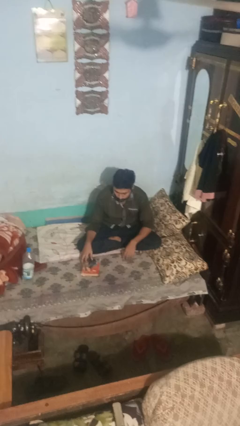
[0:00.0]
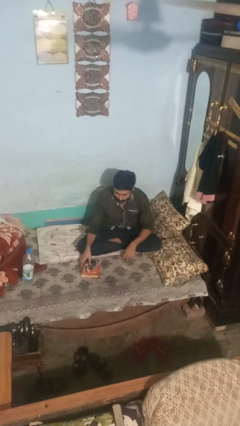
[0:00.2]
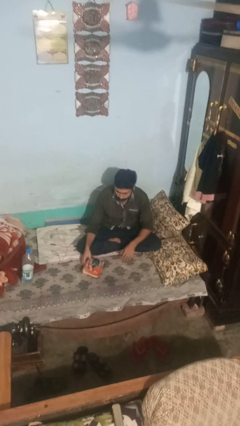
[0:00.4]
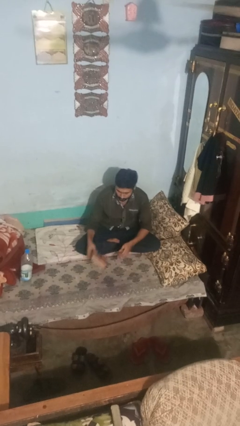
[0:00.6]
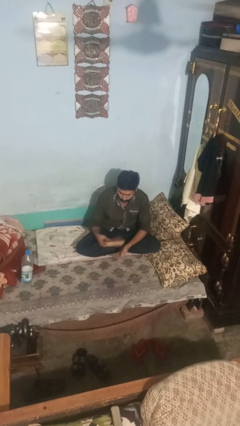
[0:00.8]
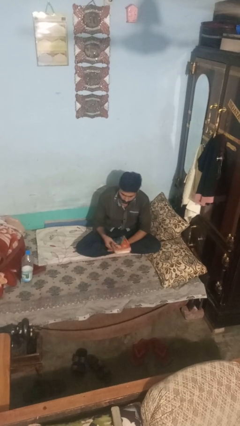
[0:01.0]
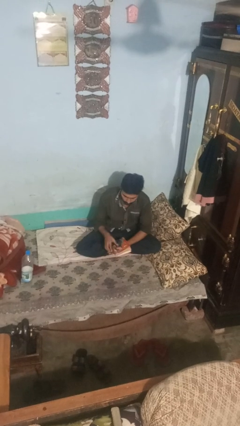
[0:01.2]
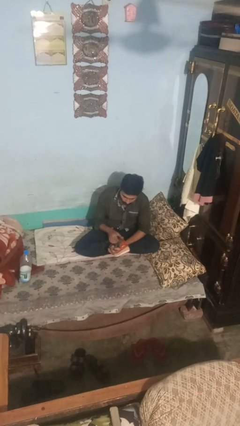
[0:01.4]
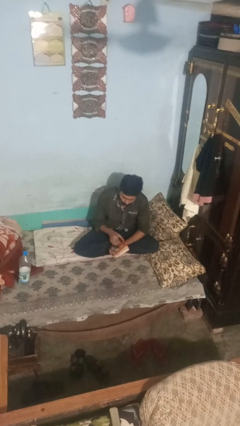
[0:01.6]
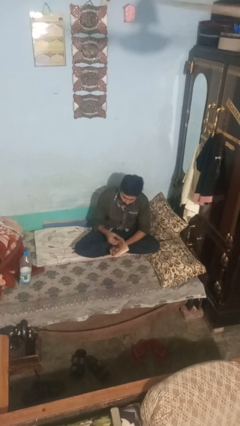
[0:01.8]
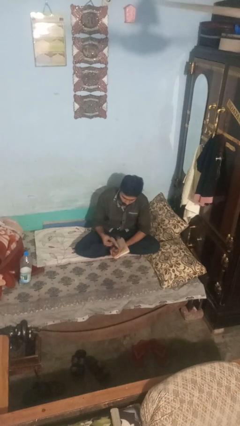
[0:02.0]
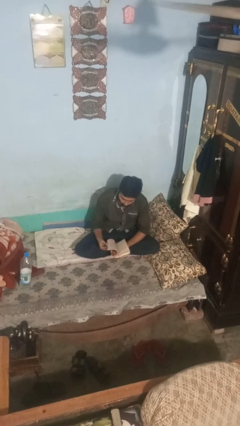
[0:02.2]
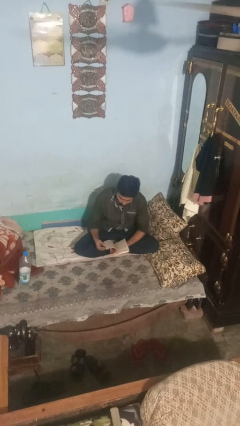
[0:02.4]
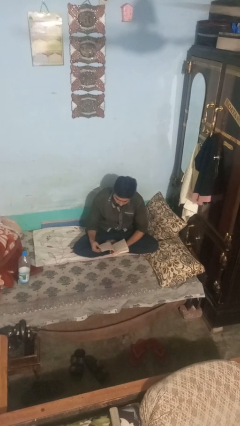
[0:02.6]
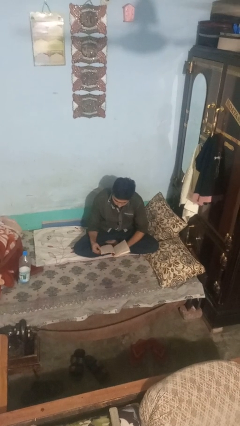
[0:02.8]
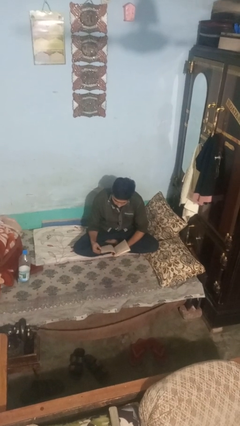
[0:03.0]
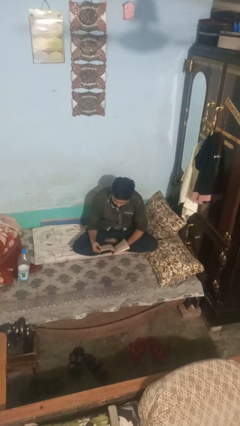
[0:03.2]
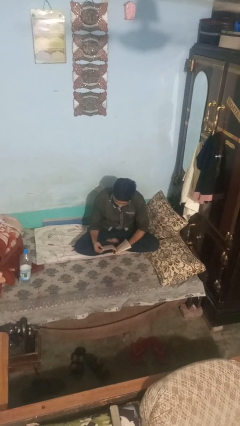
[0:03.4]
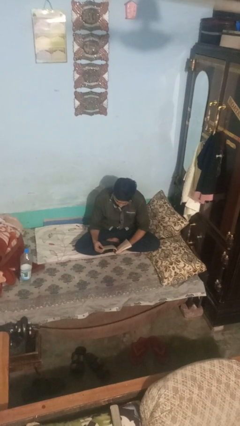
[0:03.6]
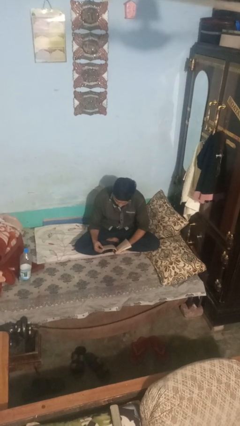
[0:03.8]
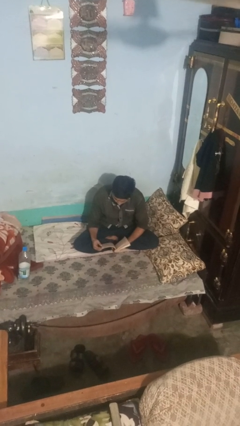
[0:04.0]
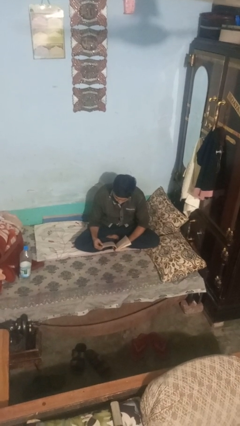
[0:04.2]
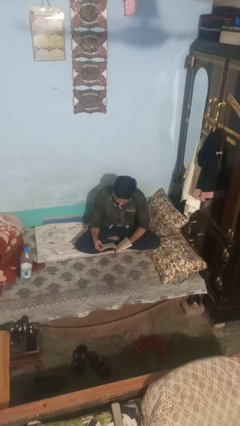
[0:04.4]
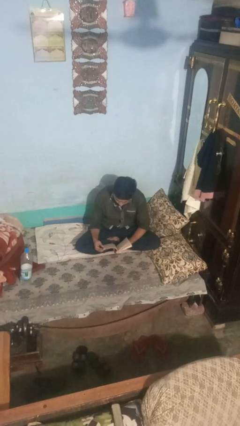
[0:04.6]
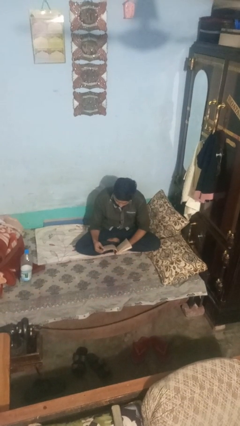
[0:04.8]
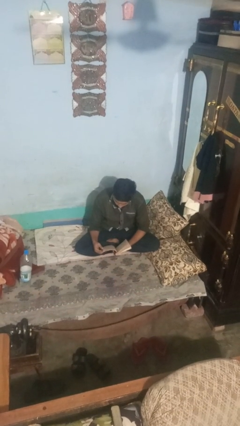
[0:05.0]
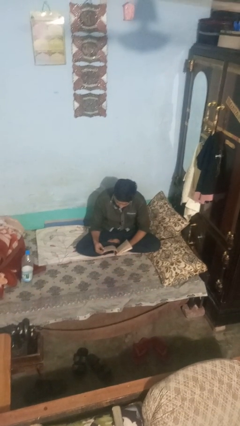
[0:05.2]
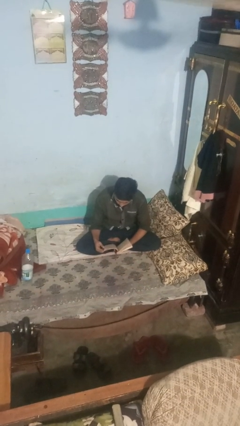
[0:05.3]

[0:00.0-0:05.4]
person reads magazine

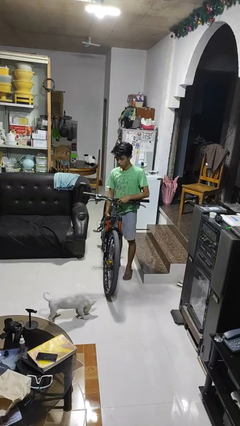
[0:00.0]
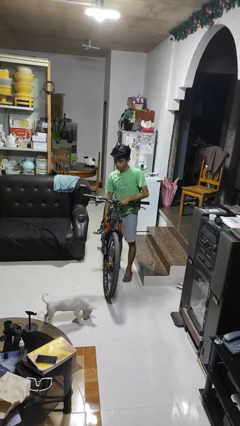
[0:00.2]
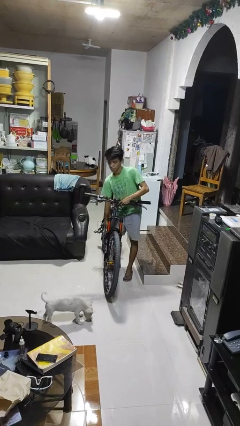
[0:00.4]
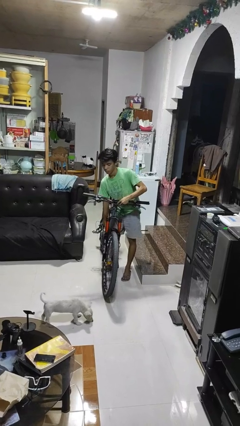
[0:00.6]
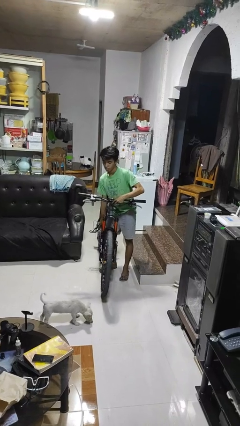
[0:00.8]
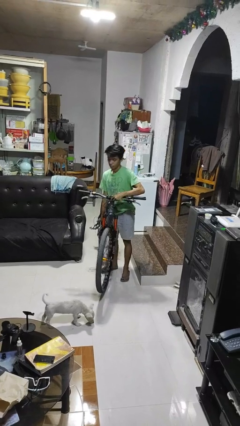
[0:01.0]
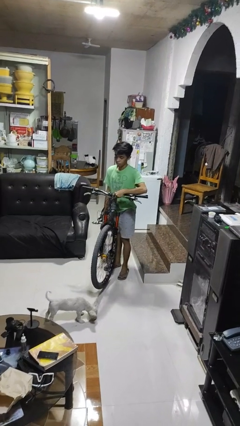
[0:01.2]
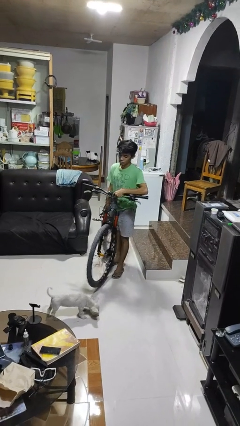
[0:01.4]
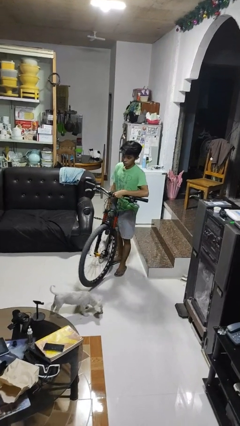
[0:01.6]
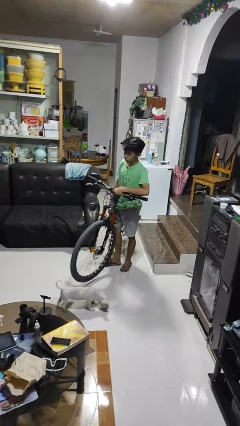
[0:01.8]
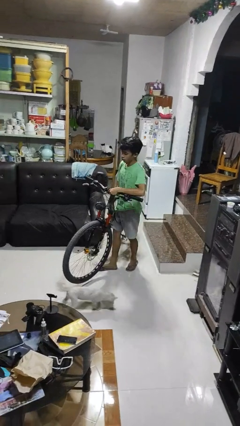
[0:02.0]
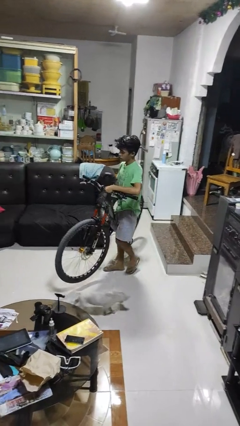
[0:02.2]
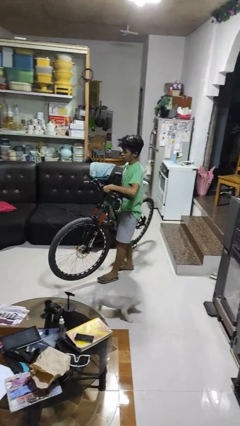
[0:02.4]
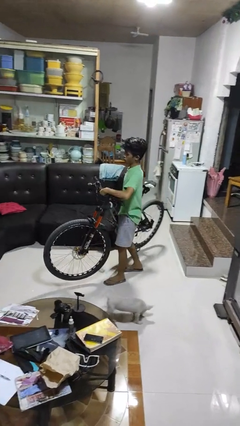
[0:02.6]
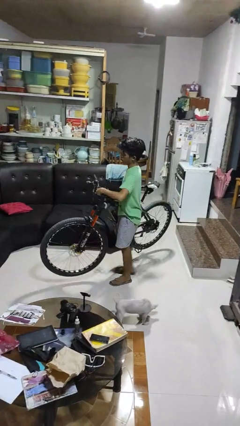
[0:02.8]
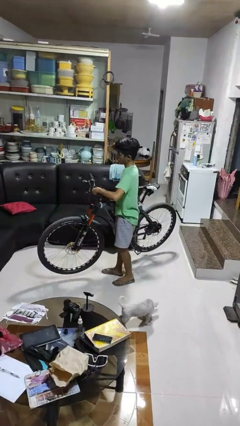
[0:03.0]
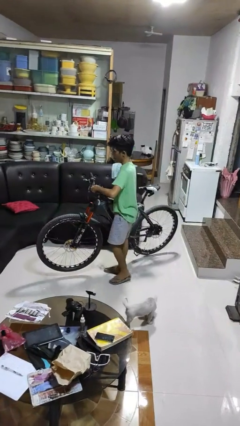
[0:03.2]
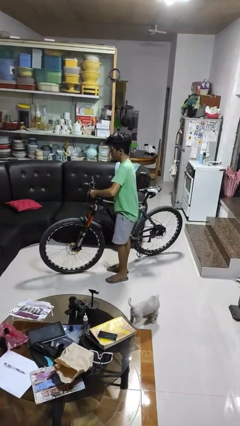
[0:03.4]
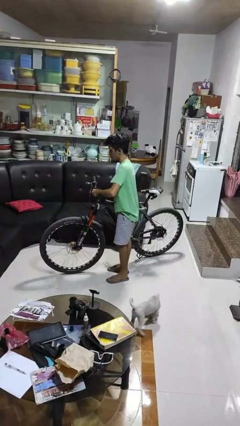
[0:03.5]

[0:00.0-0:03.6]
person carries bicycle

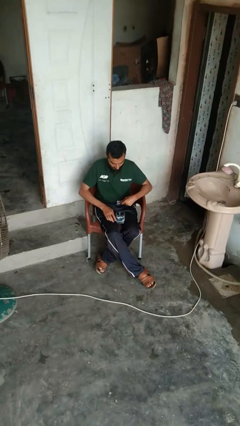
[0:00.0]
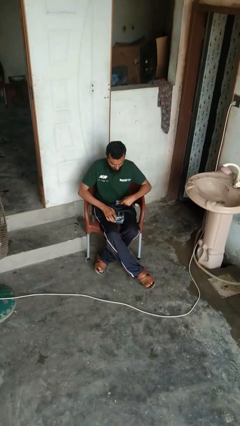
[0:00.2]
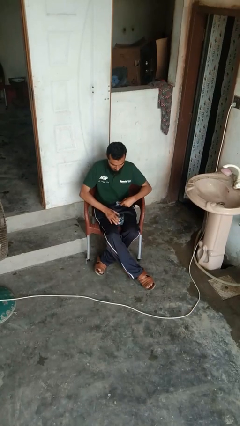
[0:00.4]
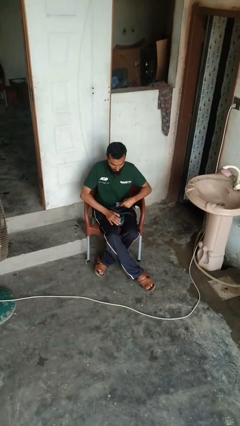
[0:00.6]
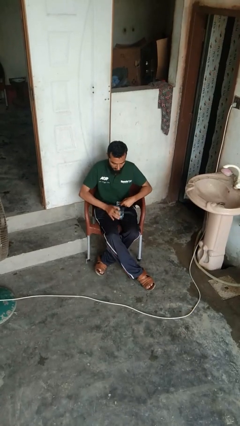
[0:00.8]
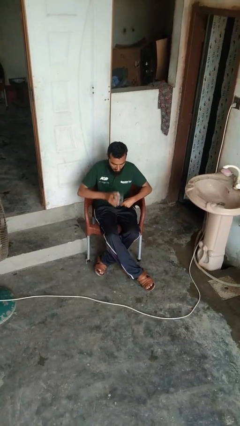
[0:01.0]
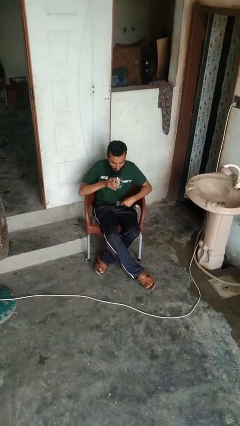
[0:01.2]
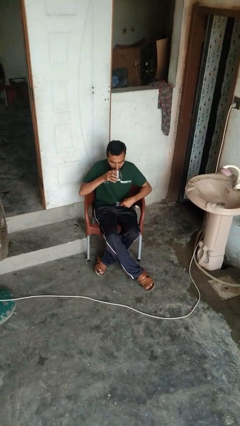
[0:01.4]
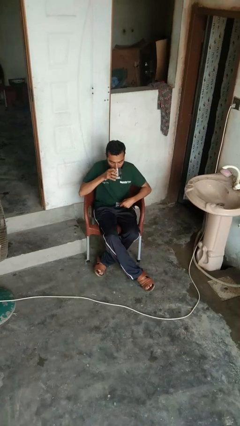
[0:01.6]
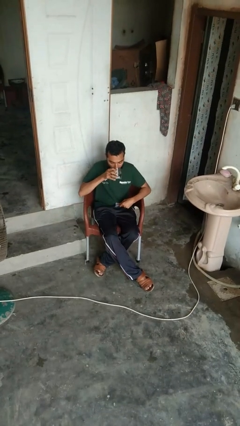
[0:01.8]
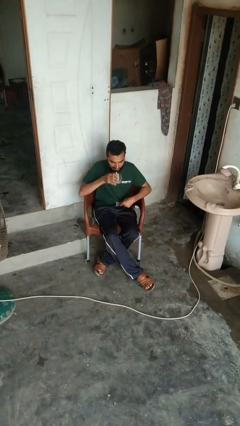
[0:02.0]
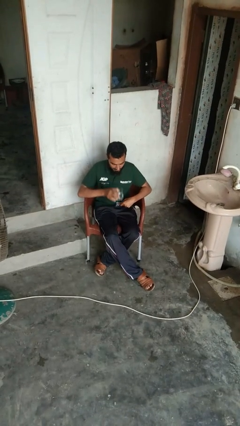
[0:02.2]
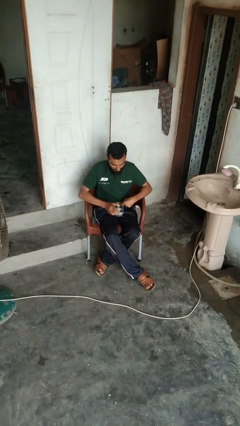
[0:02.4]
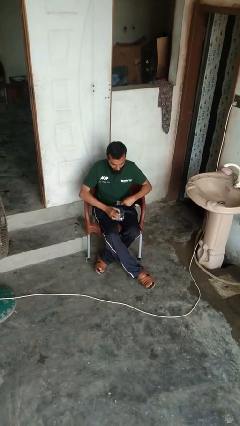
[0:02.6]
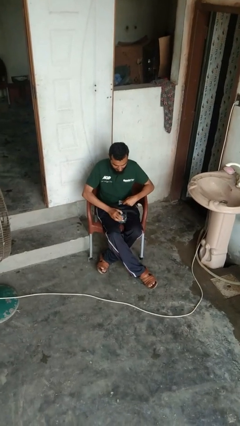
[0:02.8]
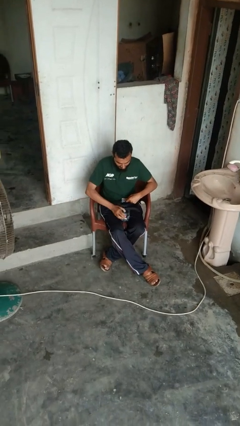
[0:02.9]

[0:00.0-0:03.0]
person drinks from cup

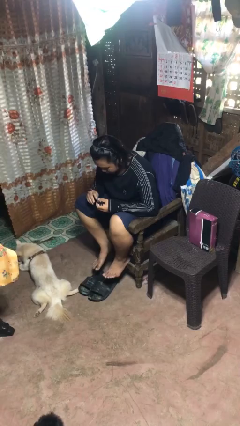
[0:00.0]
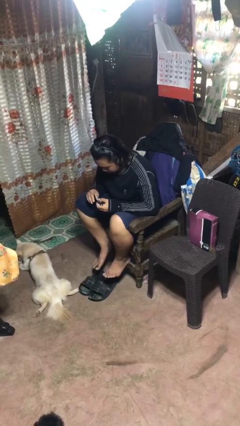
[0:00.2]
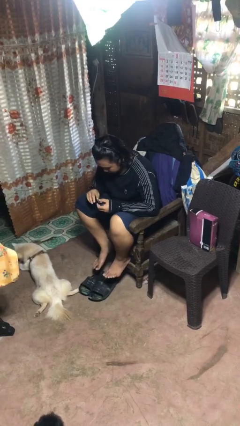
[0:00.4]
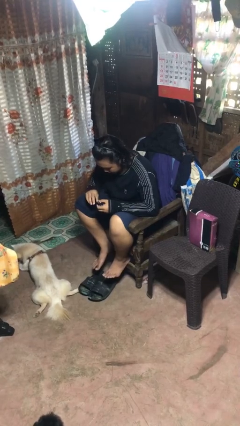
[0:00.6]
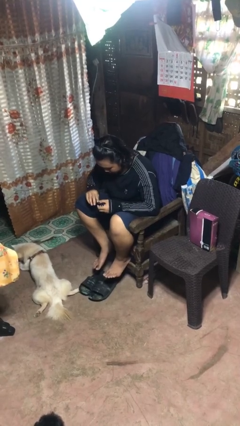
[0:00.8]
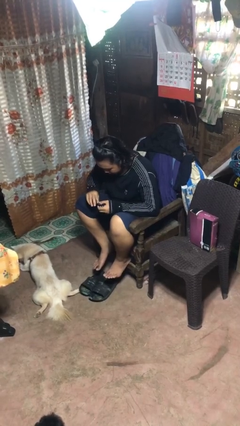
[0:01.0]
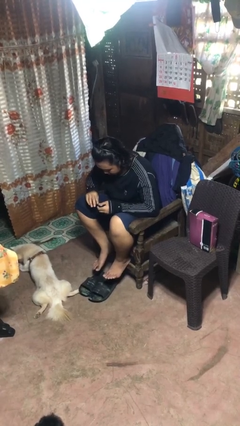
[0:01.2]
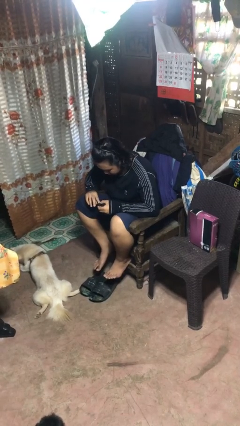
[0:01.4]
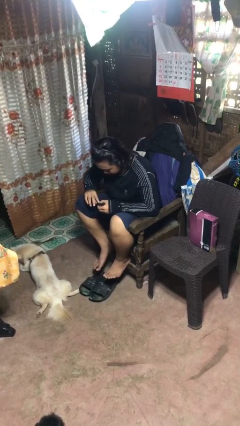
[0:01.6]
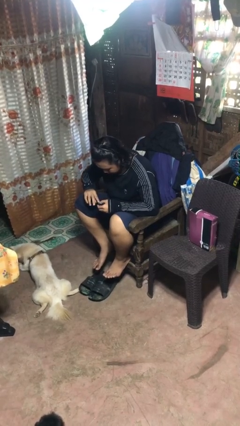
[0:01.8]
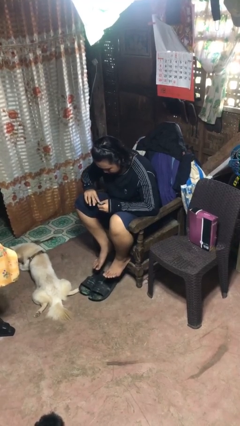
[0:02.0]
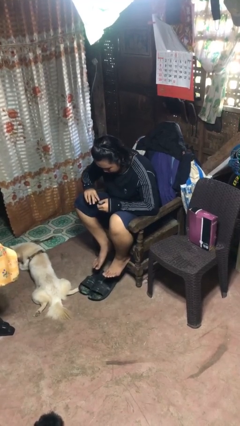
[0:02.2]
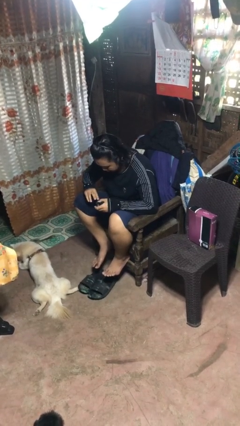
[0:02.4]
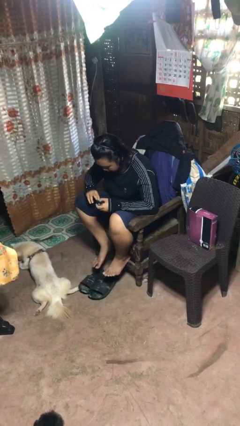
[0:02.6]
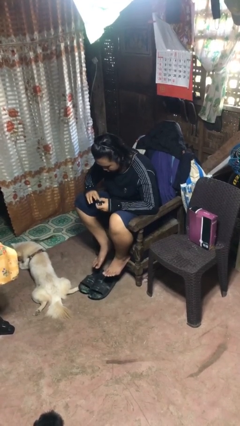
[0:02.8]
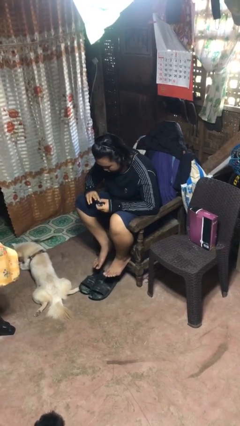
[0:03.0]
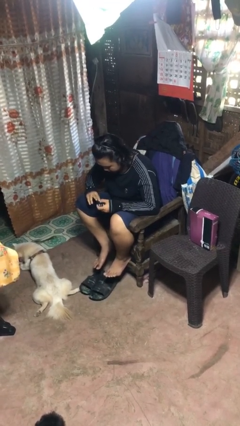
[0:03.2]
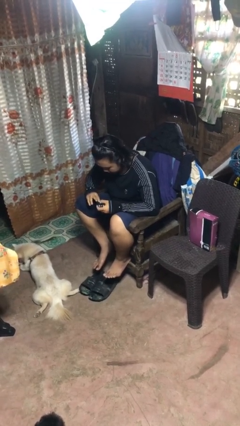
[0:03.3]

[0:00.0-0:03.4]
person clips fingernails

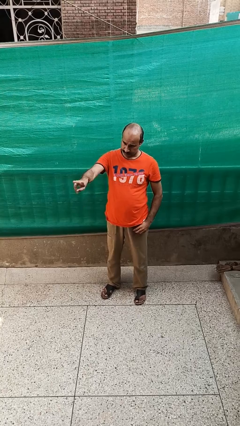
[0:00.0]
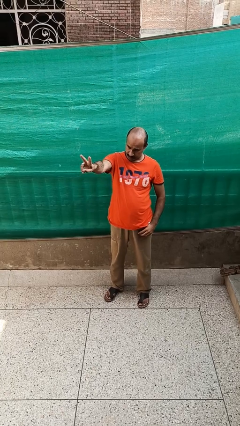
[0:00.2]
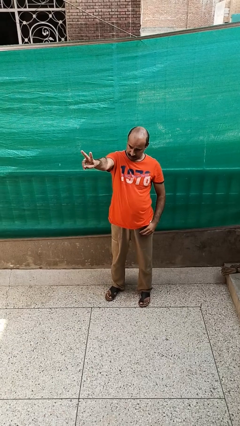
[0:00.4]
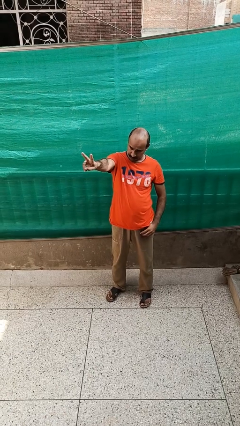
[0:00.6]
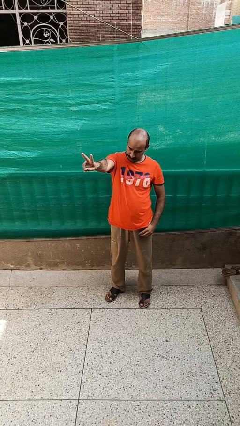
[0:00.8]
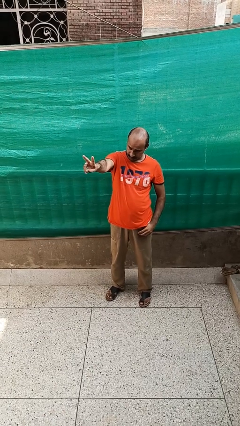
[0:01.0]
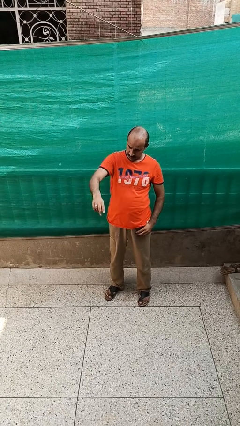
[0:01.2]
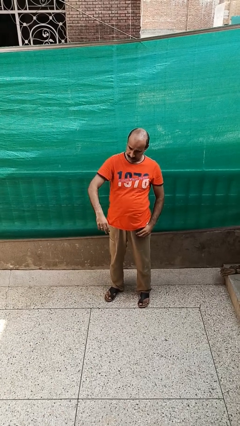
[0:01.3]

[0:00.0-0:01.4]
person gestures peace

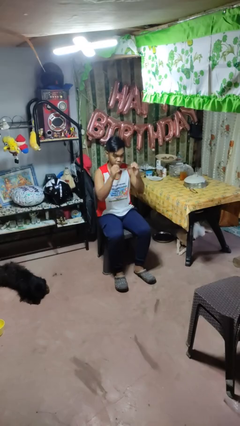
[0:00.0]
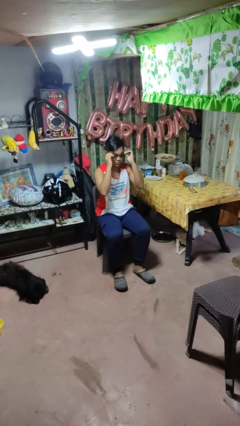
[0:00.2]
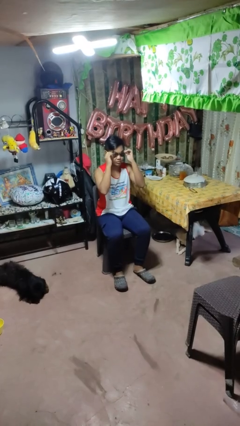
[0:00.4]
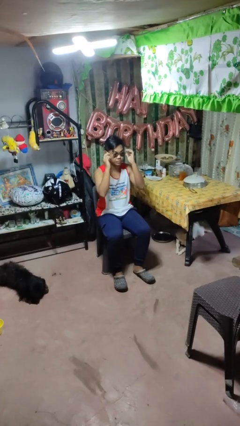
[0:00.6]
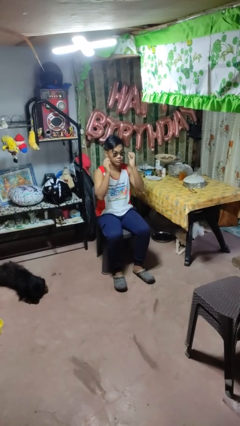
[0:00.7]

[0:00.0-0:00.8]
person puts on sunglasses
